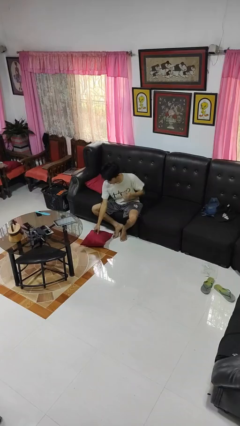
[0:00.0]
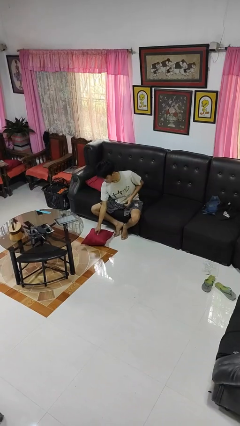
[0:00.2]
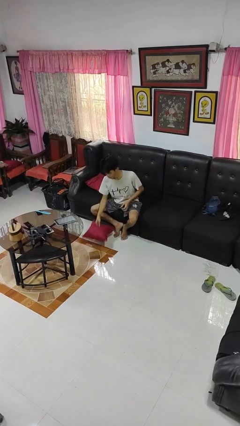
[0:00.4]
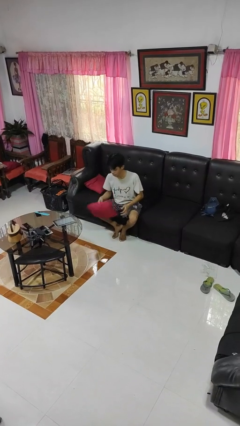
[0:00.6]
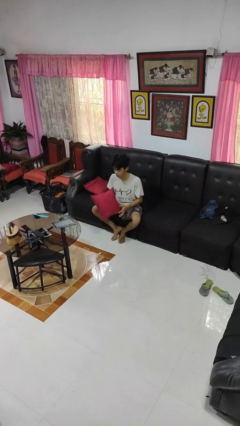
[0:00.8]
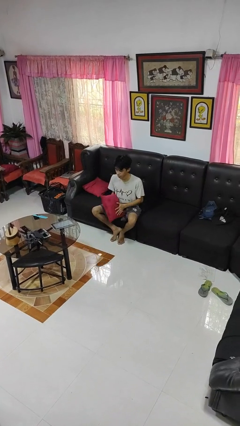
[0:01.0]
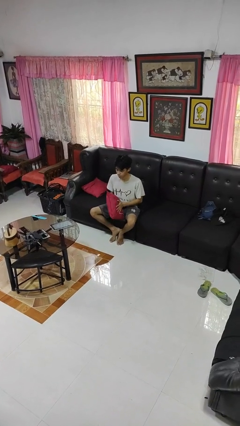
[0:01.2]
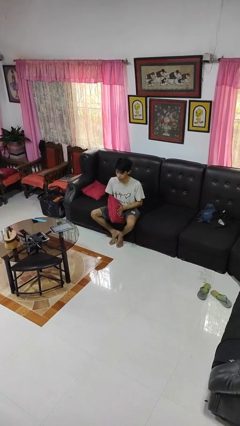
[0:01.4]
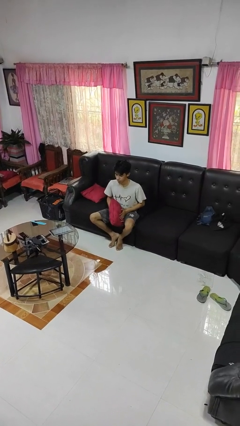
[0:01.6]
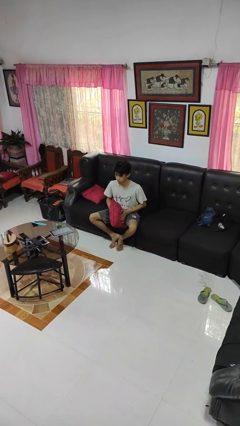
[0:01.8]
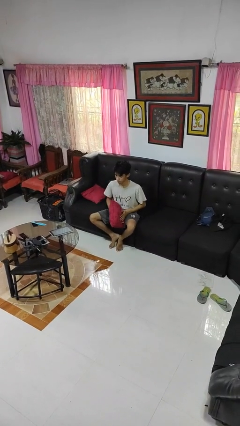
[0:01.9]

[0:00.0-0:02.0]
person picks up object from floor

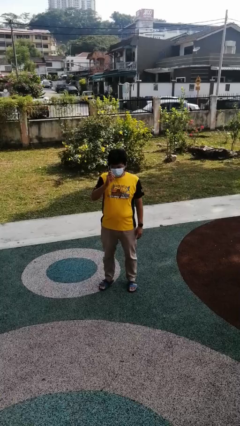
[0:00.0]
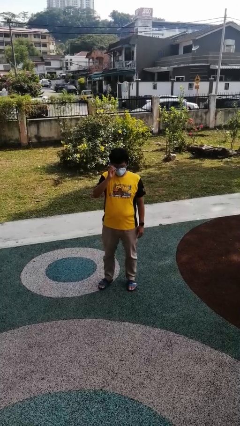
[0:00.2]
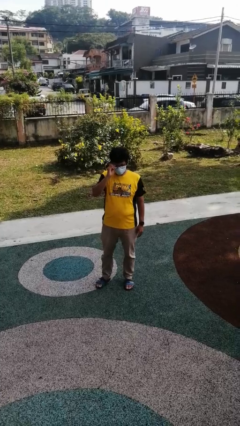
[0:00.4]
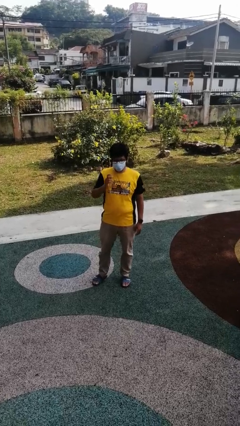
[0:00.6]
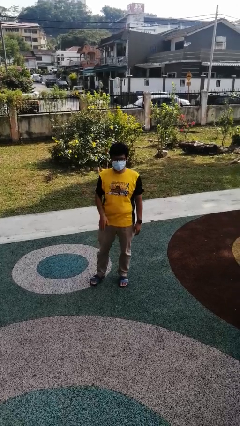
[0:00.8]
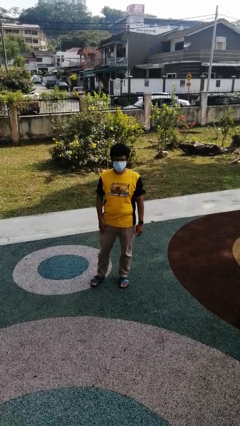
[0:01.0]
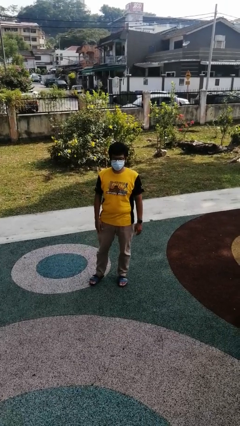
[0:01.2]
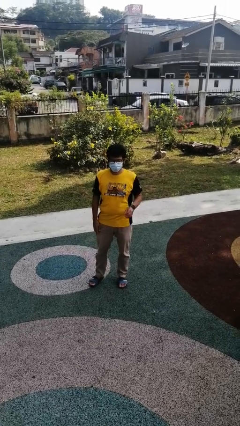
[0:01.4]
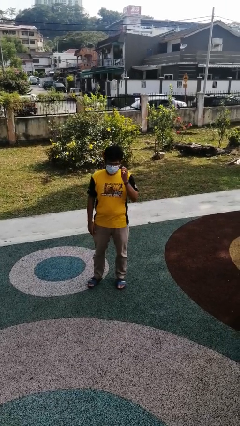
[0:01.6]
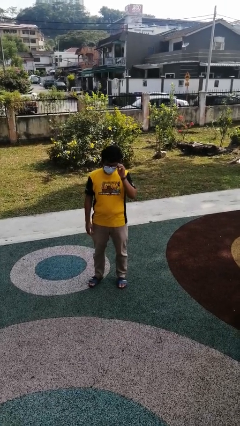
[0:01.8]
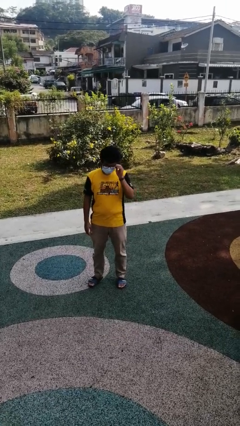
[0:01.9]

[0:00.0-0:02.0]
person puts on glasses

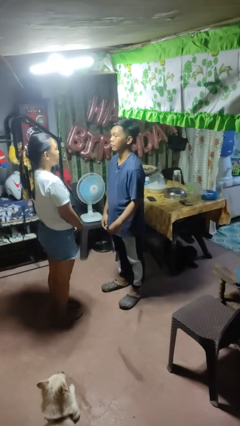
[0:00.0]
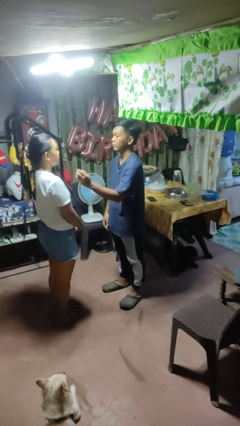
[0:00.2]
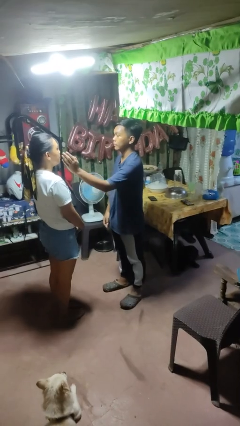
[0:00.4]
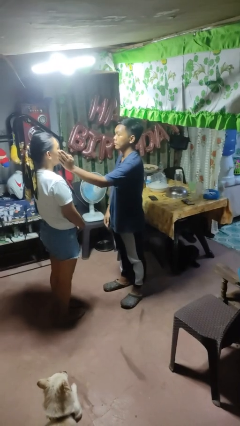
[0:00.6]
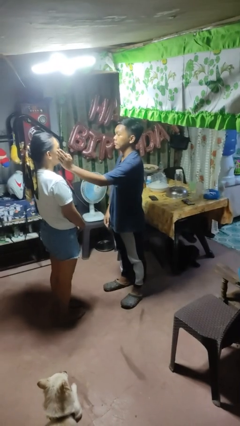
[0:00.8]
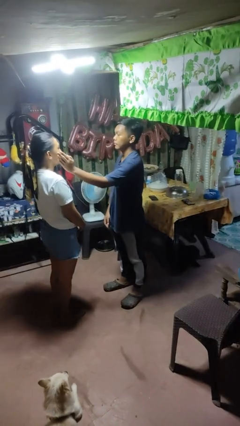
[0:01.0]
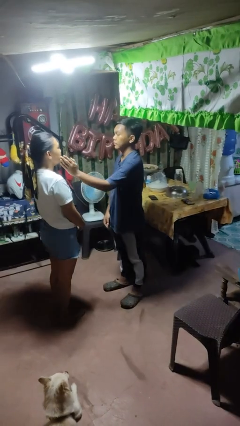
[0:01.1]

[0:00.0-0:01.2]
person touches face of person

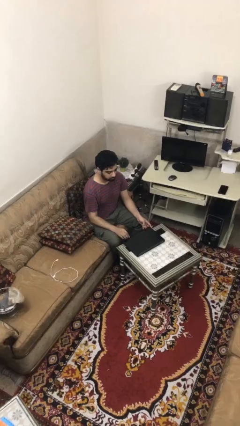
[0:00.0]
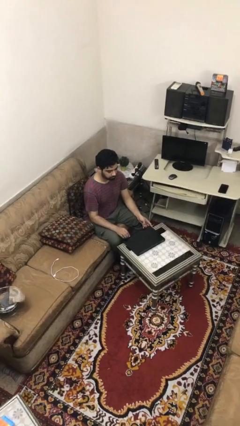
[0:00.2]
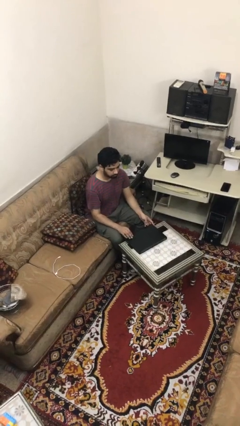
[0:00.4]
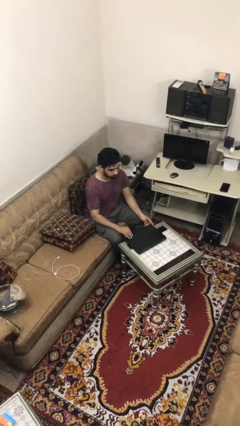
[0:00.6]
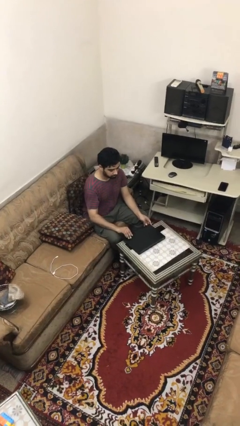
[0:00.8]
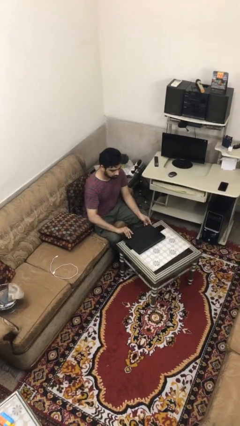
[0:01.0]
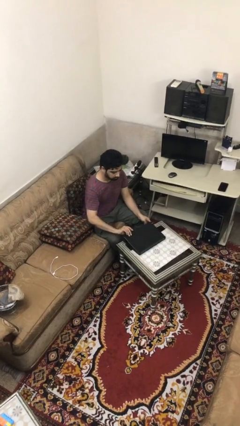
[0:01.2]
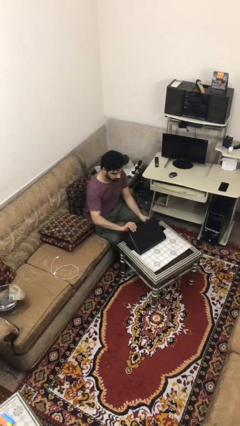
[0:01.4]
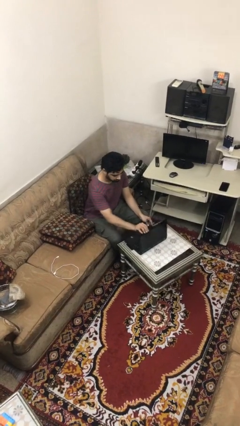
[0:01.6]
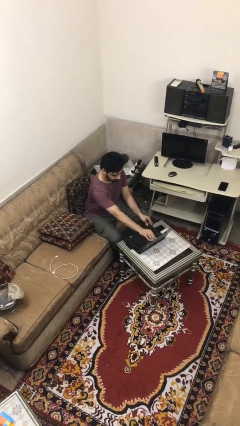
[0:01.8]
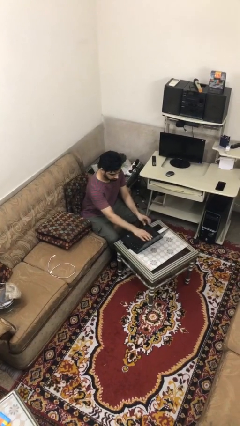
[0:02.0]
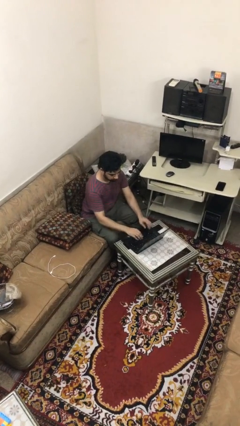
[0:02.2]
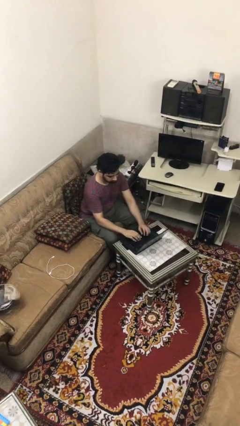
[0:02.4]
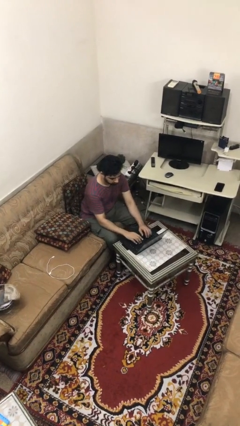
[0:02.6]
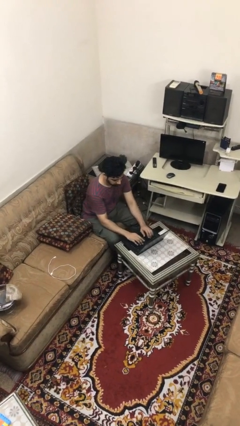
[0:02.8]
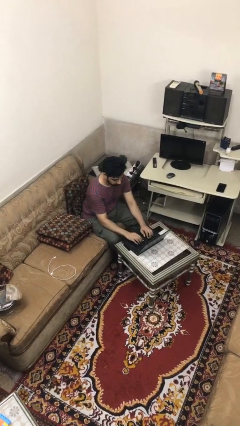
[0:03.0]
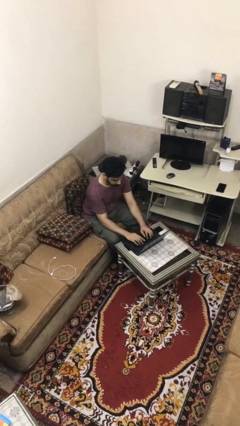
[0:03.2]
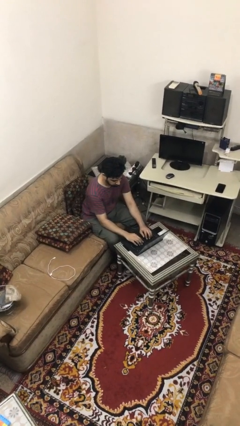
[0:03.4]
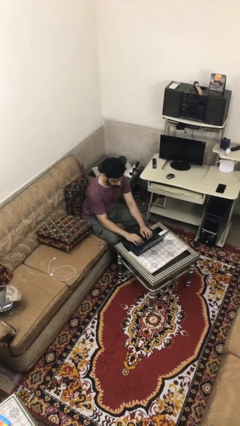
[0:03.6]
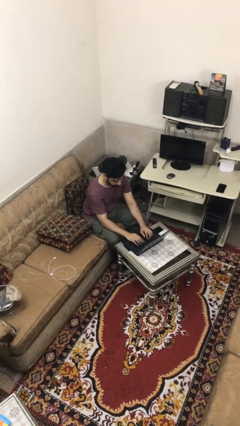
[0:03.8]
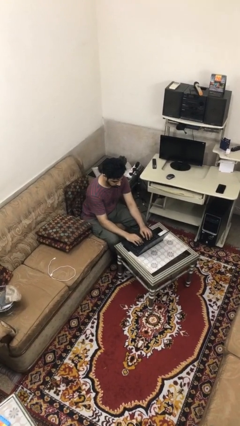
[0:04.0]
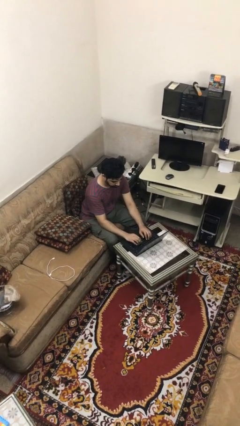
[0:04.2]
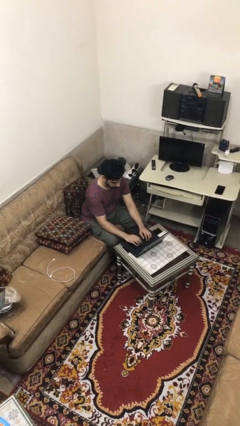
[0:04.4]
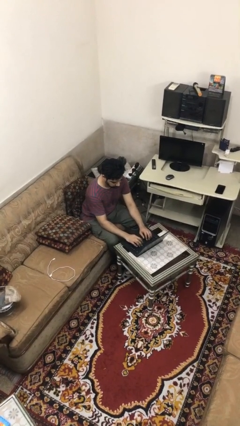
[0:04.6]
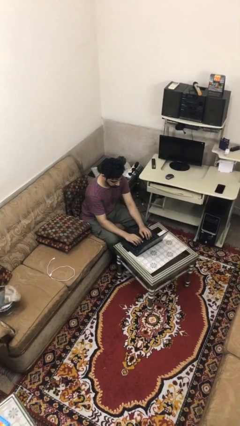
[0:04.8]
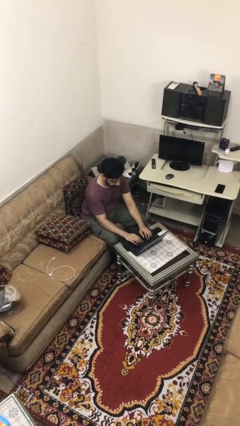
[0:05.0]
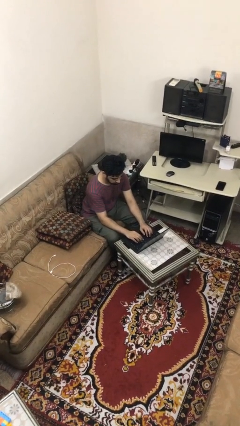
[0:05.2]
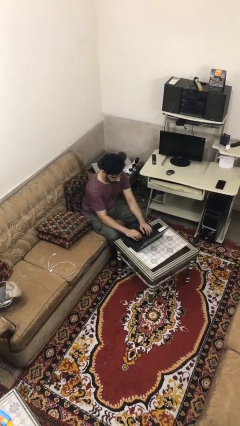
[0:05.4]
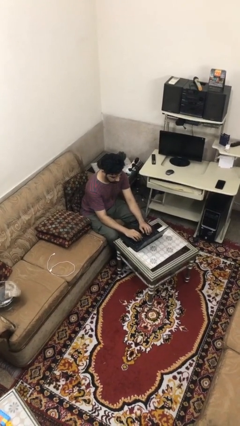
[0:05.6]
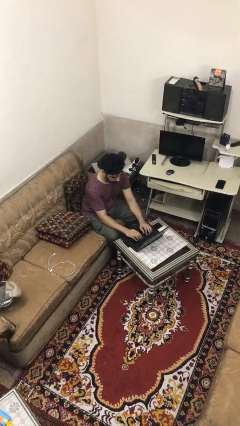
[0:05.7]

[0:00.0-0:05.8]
person interacts with laptop

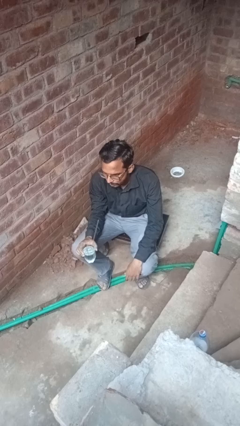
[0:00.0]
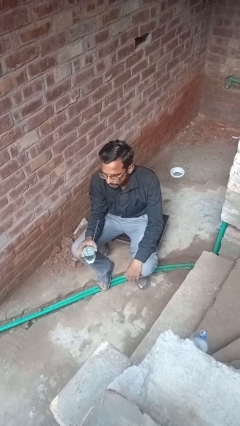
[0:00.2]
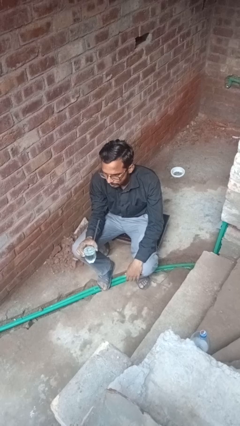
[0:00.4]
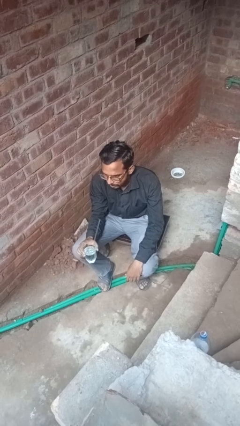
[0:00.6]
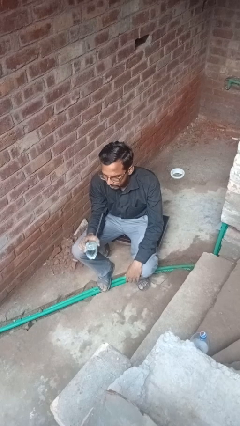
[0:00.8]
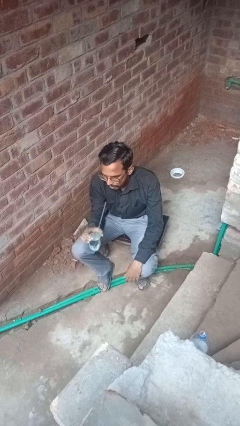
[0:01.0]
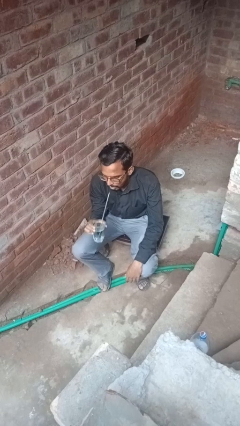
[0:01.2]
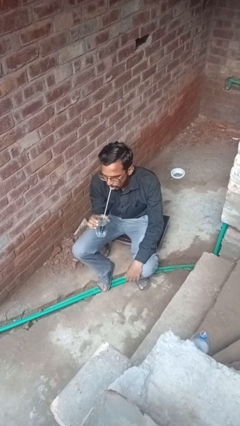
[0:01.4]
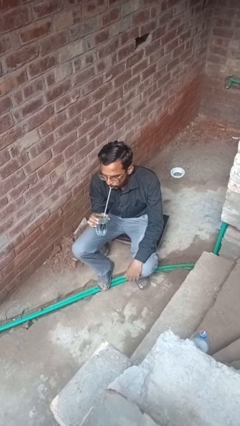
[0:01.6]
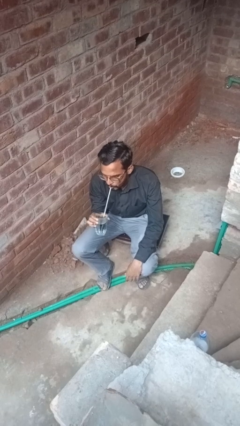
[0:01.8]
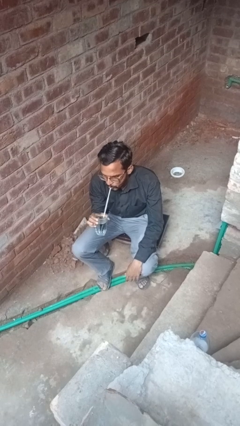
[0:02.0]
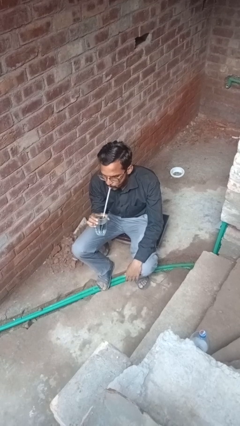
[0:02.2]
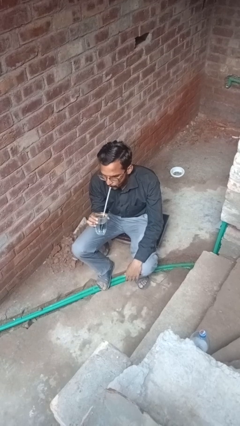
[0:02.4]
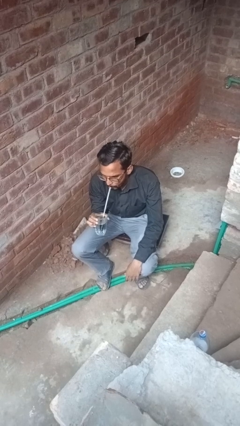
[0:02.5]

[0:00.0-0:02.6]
person drinks from straw

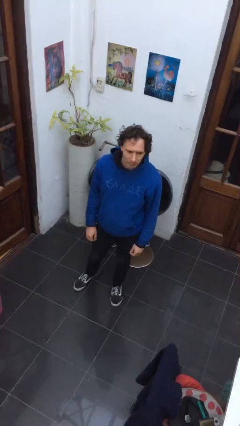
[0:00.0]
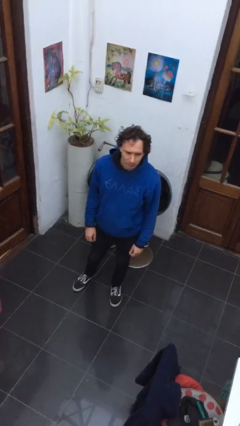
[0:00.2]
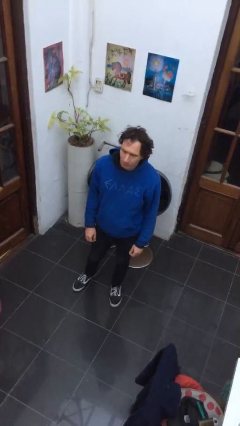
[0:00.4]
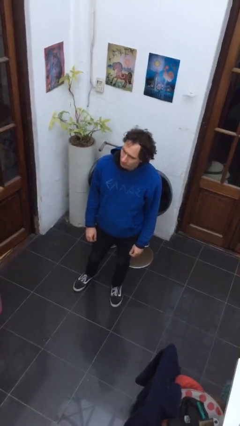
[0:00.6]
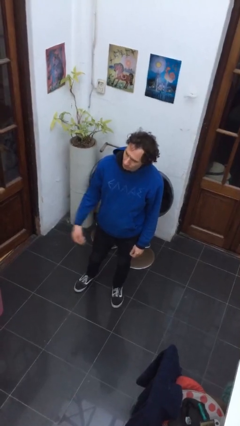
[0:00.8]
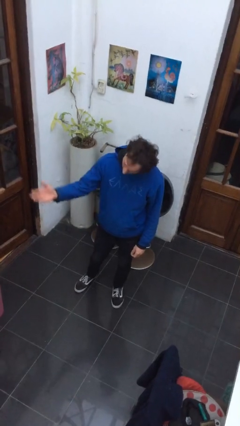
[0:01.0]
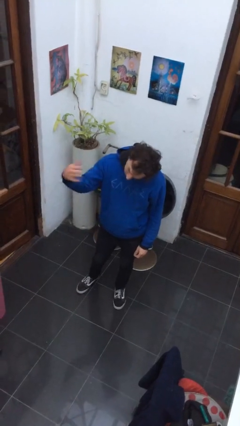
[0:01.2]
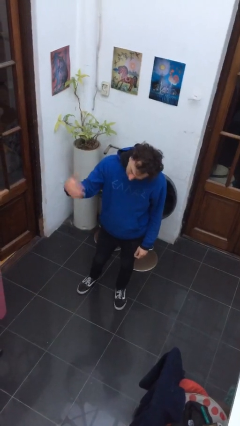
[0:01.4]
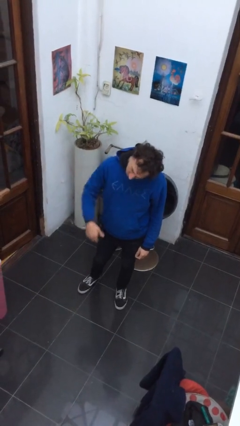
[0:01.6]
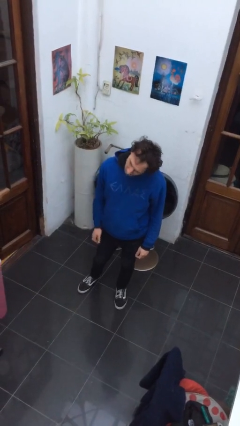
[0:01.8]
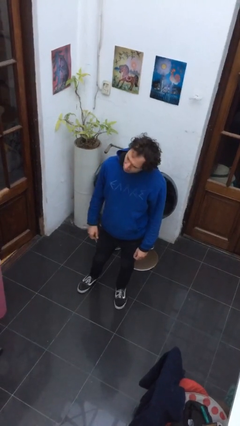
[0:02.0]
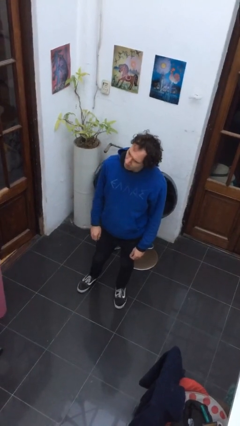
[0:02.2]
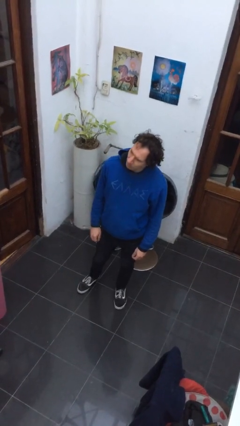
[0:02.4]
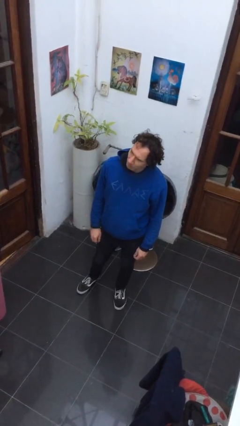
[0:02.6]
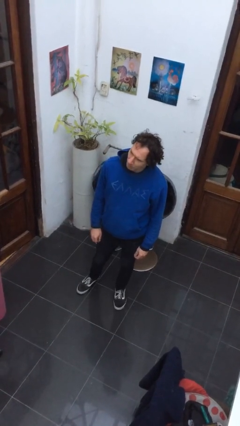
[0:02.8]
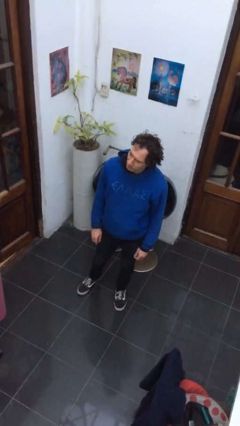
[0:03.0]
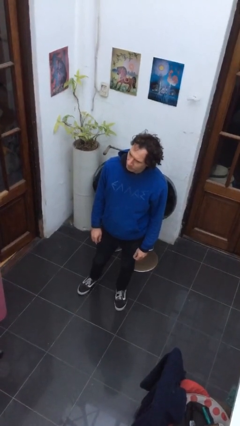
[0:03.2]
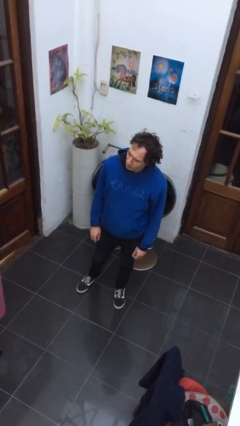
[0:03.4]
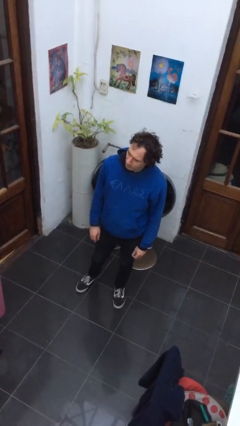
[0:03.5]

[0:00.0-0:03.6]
person gestures come here

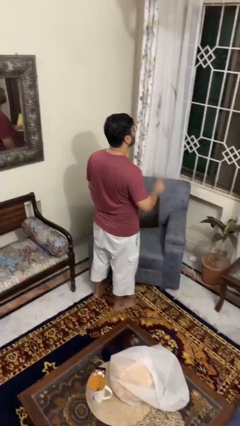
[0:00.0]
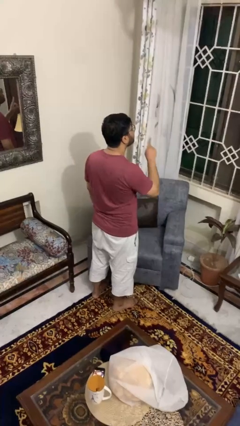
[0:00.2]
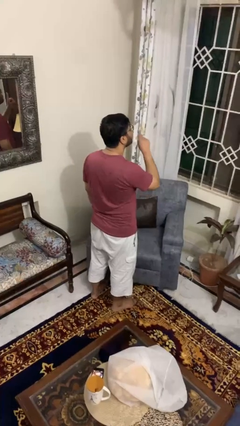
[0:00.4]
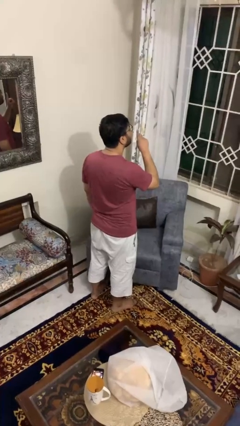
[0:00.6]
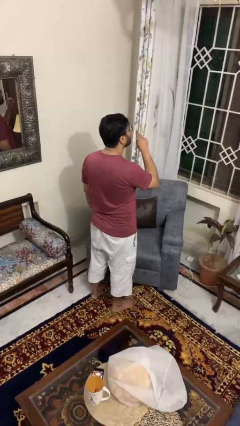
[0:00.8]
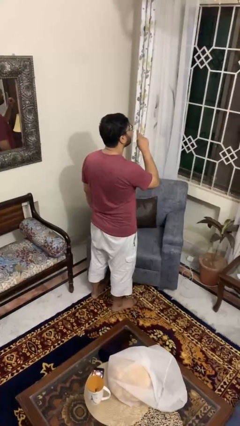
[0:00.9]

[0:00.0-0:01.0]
person gestures be quiet
